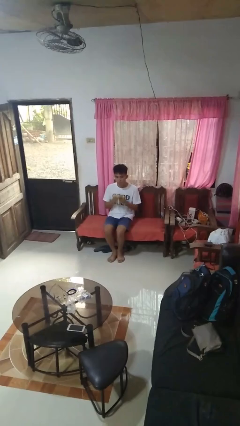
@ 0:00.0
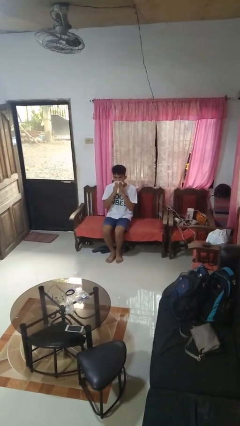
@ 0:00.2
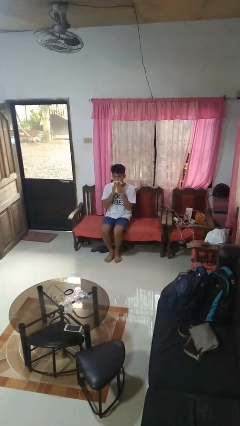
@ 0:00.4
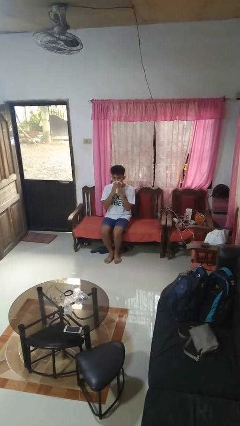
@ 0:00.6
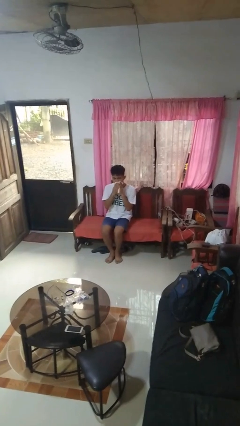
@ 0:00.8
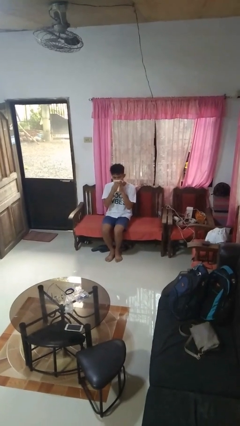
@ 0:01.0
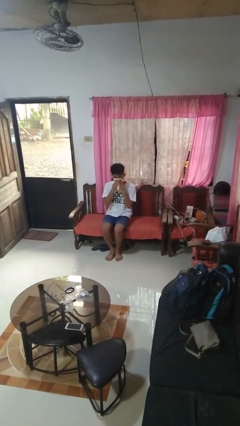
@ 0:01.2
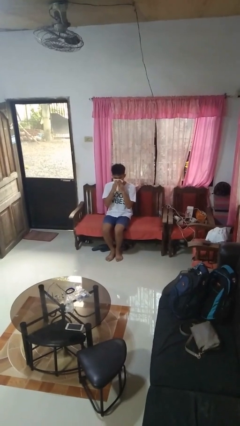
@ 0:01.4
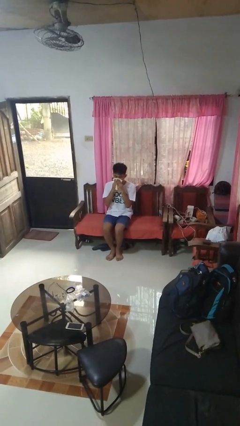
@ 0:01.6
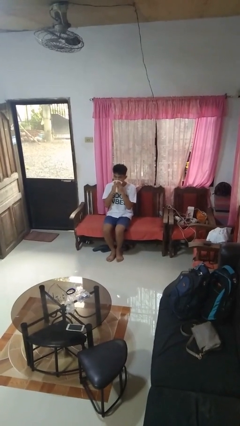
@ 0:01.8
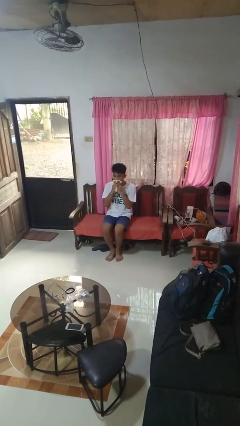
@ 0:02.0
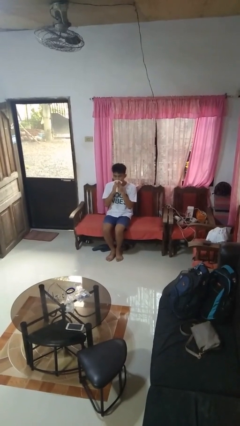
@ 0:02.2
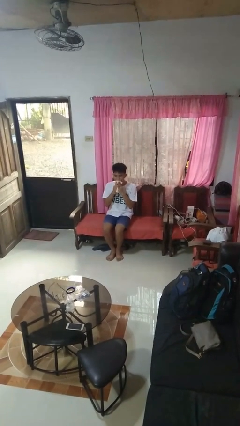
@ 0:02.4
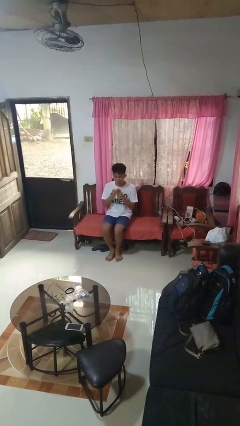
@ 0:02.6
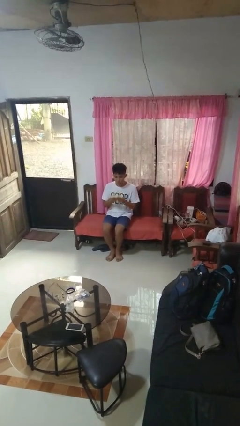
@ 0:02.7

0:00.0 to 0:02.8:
person wipes mouth with napkin

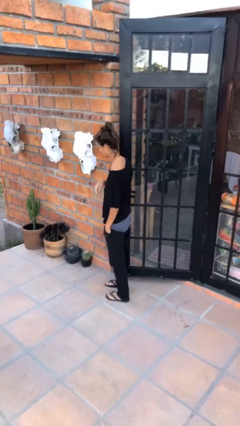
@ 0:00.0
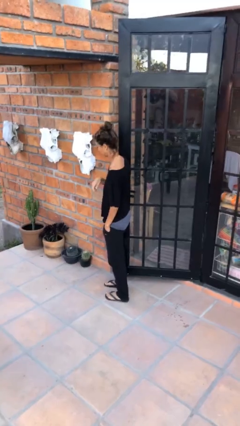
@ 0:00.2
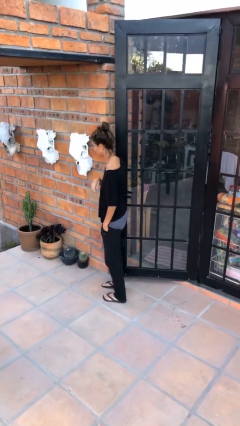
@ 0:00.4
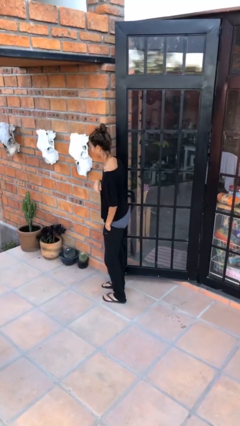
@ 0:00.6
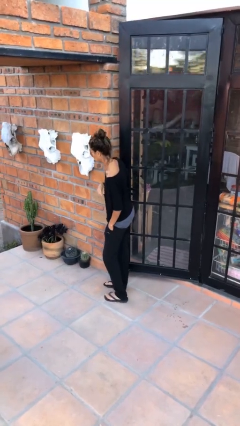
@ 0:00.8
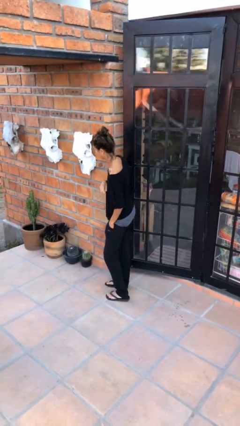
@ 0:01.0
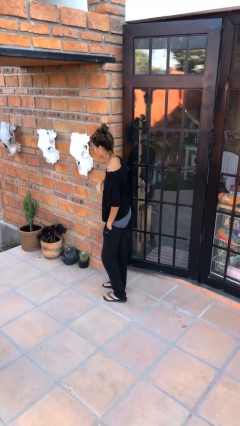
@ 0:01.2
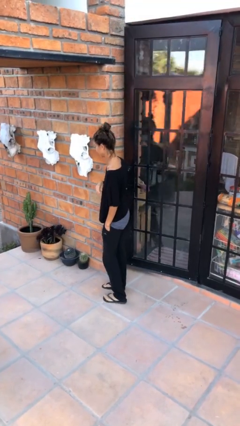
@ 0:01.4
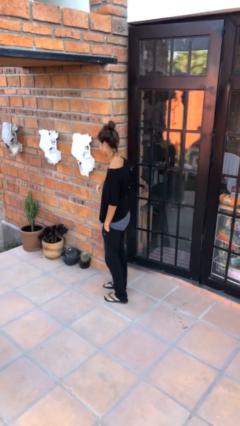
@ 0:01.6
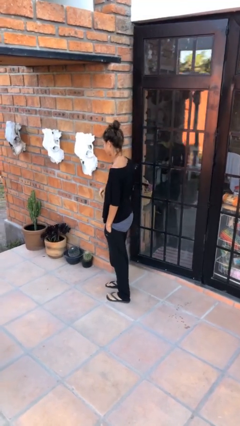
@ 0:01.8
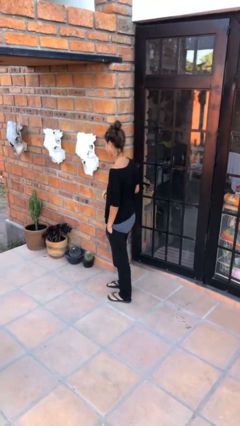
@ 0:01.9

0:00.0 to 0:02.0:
person closes door with hip

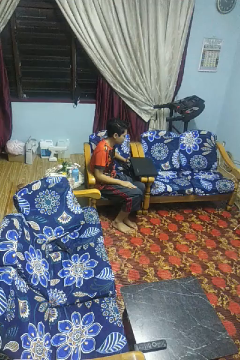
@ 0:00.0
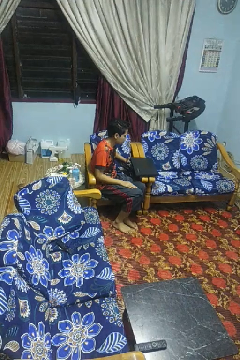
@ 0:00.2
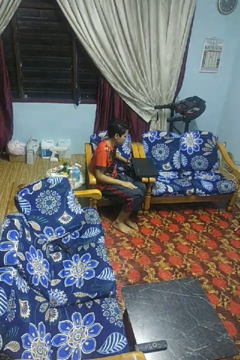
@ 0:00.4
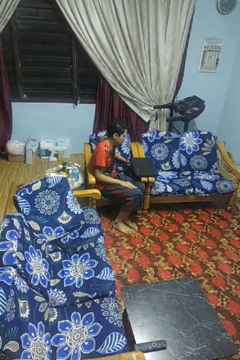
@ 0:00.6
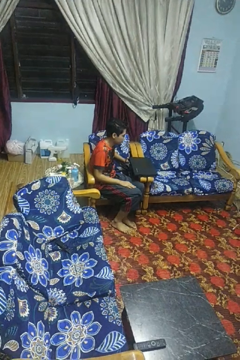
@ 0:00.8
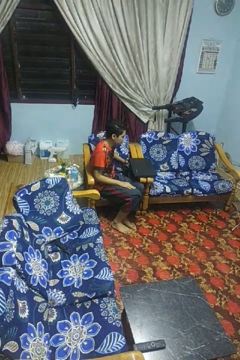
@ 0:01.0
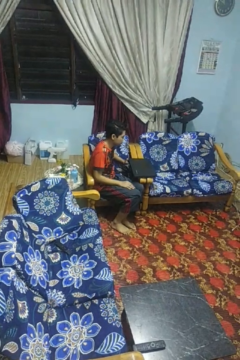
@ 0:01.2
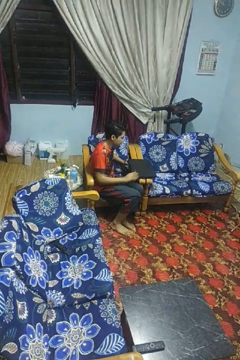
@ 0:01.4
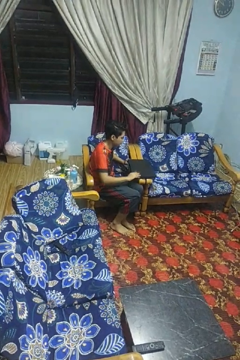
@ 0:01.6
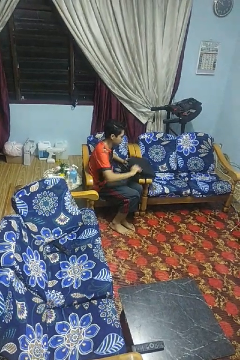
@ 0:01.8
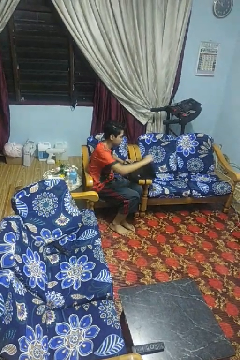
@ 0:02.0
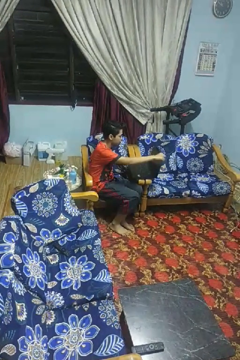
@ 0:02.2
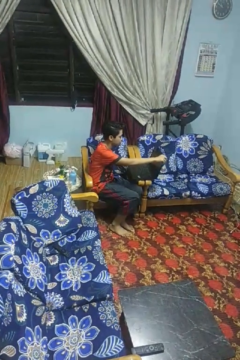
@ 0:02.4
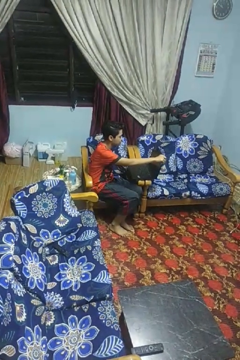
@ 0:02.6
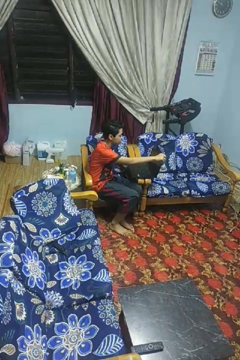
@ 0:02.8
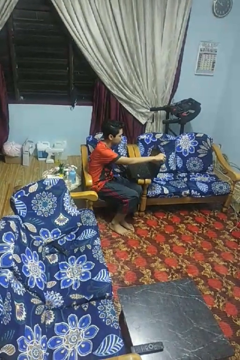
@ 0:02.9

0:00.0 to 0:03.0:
person opens laptop

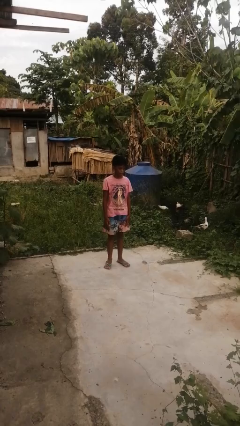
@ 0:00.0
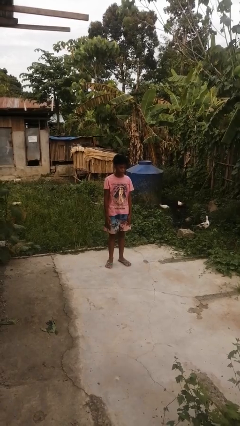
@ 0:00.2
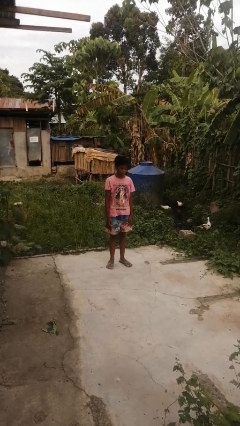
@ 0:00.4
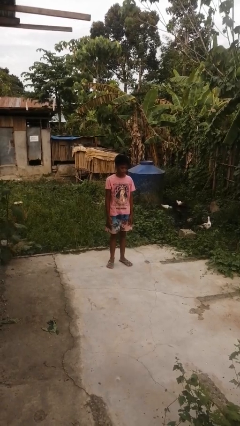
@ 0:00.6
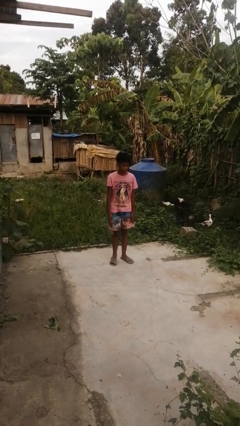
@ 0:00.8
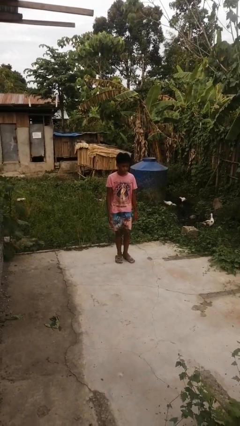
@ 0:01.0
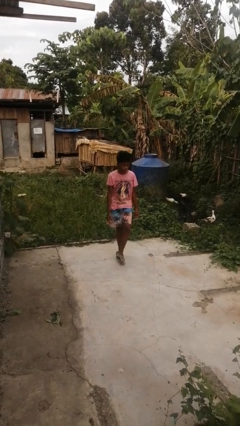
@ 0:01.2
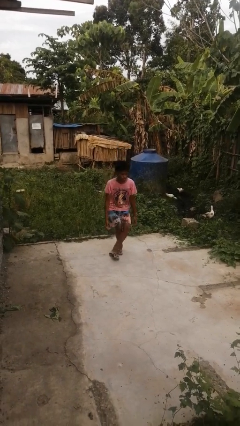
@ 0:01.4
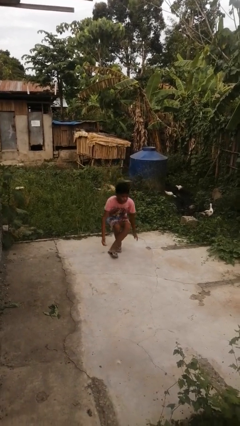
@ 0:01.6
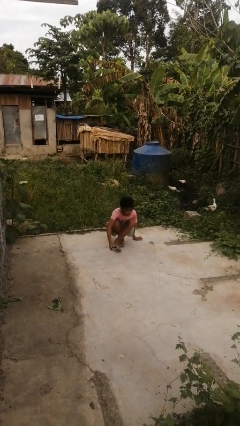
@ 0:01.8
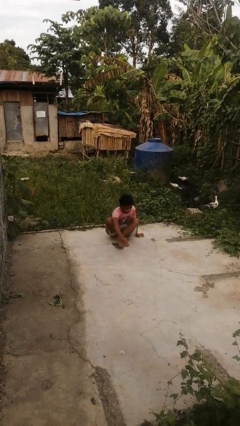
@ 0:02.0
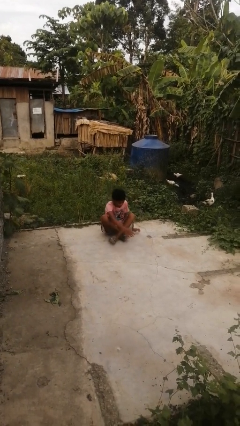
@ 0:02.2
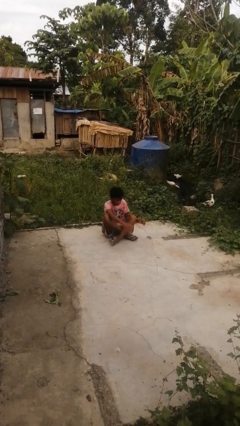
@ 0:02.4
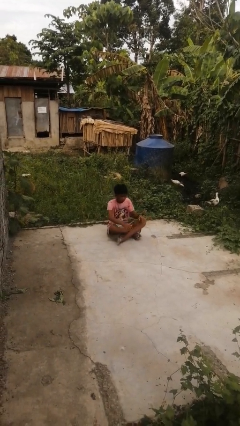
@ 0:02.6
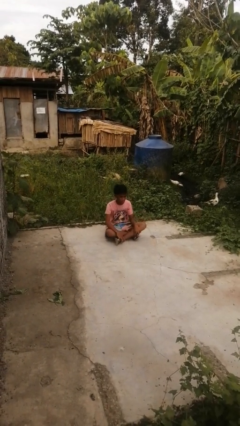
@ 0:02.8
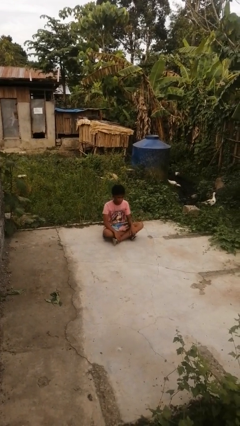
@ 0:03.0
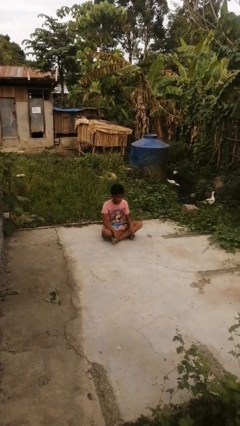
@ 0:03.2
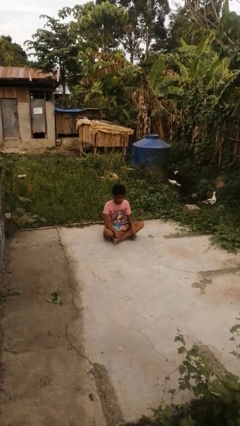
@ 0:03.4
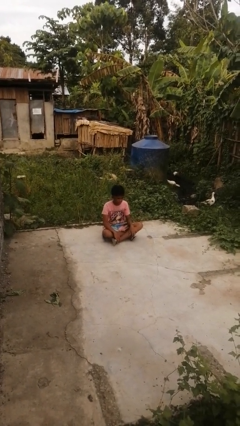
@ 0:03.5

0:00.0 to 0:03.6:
person sits crisscross

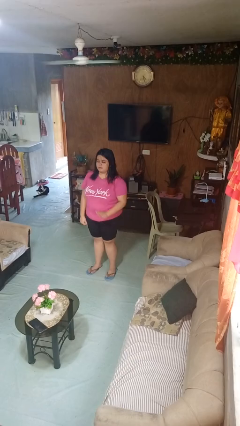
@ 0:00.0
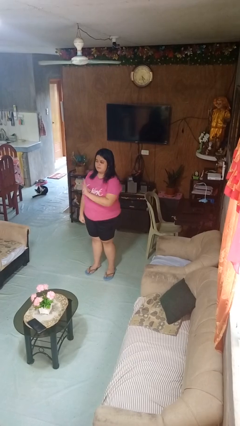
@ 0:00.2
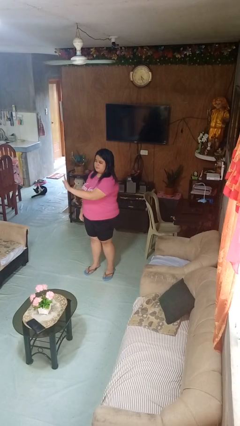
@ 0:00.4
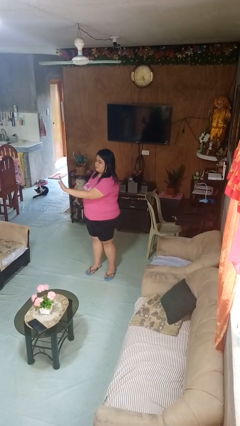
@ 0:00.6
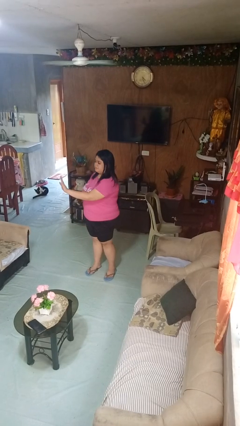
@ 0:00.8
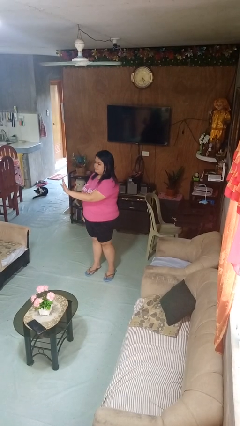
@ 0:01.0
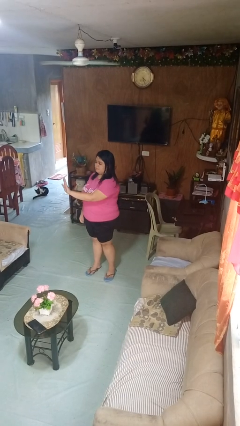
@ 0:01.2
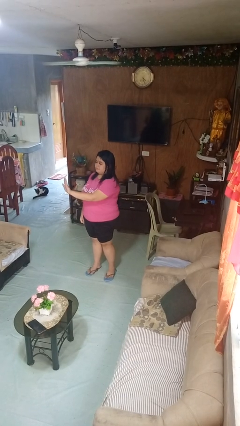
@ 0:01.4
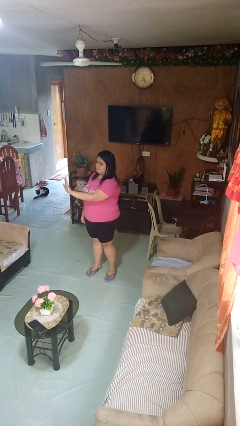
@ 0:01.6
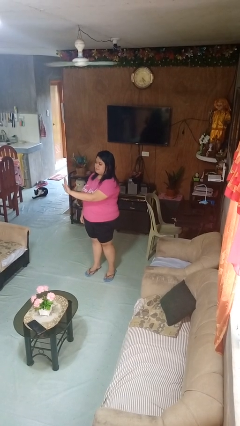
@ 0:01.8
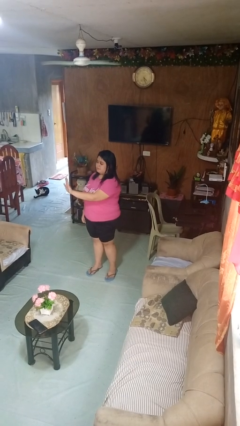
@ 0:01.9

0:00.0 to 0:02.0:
person gestures stop

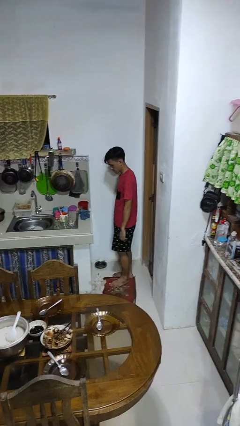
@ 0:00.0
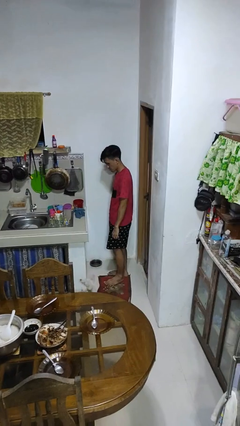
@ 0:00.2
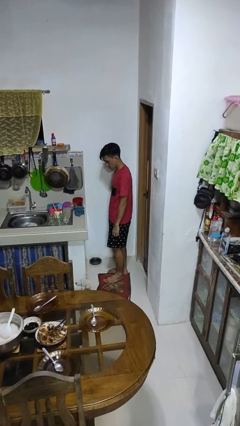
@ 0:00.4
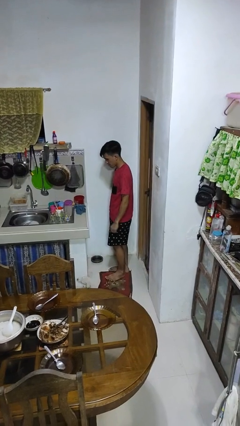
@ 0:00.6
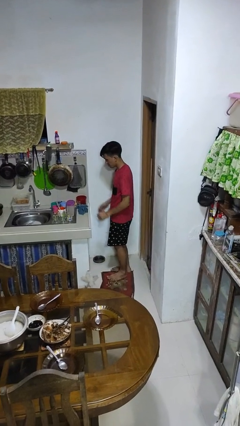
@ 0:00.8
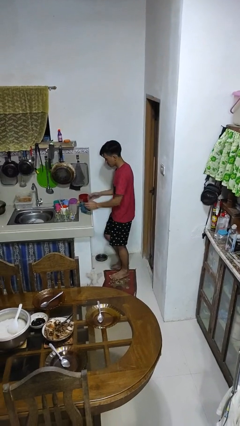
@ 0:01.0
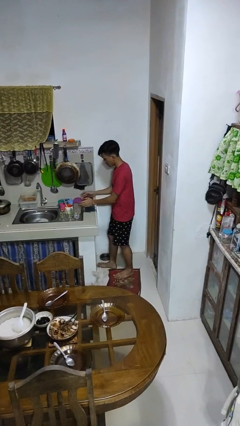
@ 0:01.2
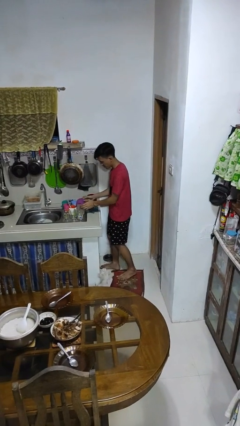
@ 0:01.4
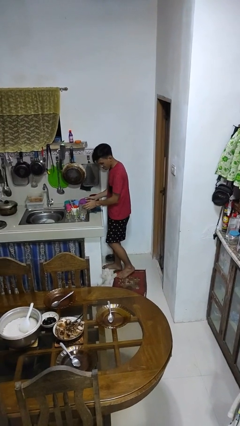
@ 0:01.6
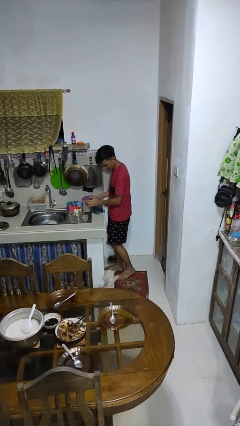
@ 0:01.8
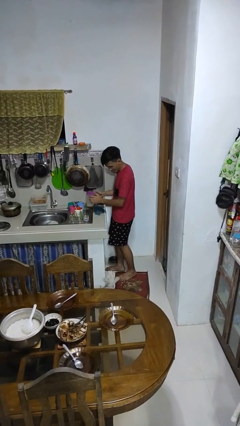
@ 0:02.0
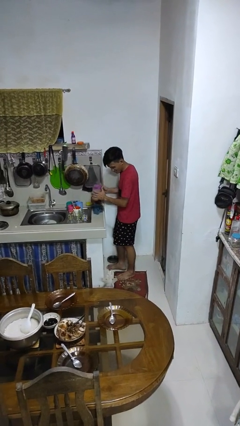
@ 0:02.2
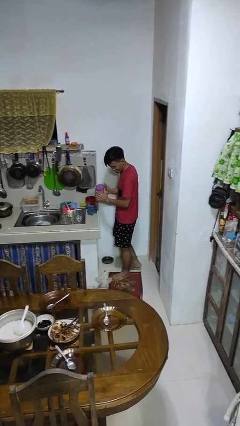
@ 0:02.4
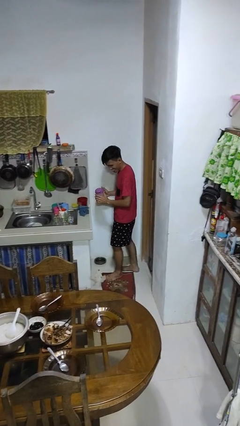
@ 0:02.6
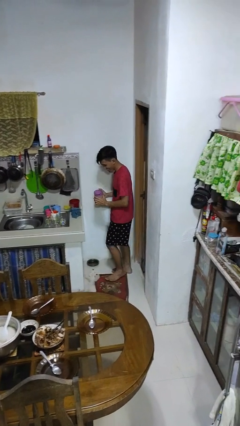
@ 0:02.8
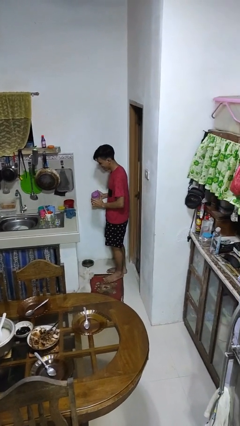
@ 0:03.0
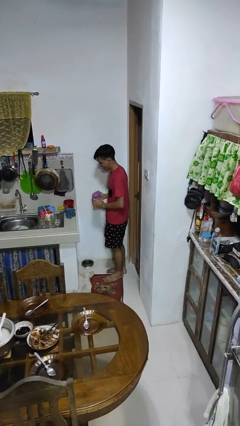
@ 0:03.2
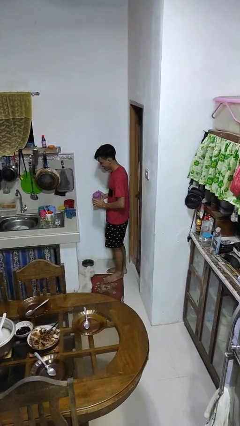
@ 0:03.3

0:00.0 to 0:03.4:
person picks up object from countertop

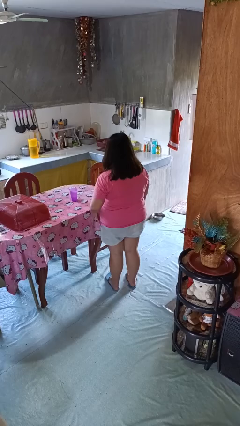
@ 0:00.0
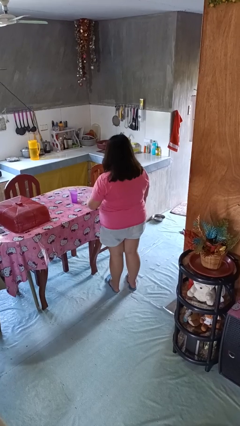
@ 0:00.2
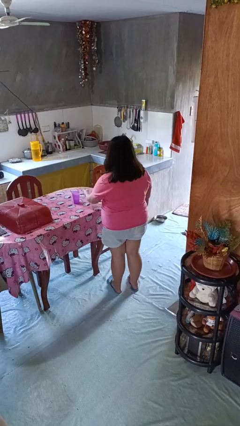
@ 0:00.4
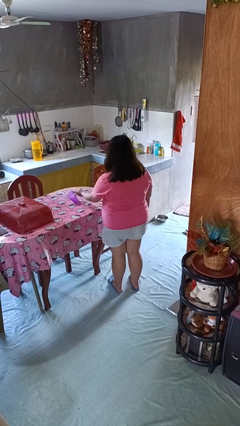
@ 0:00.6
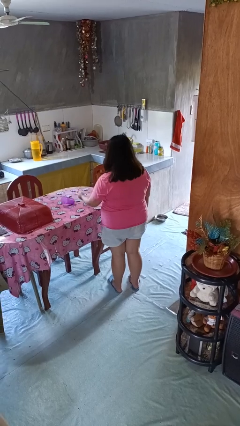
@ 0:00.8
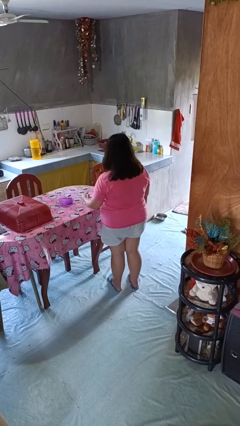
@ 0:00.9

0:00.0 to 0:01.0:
person knocks over glass
